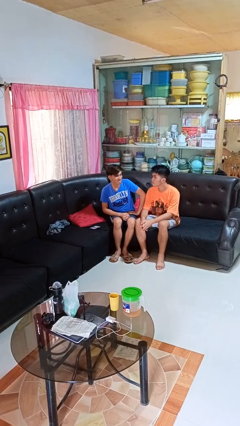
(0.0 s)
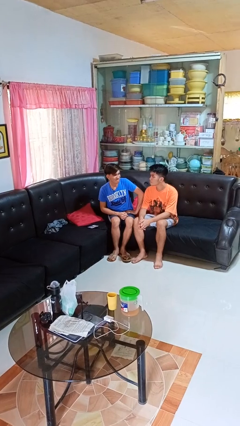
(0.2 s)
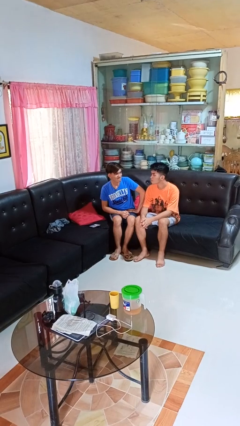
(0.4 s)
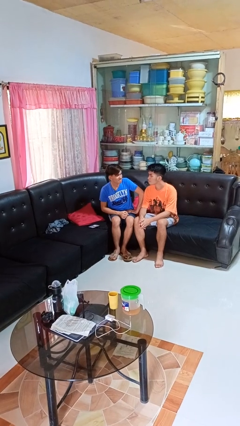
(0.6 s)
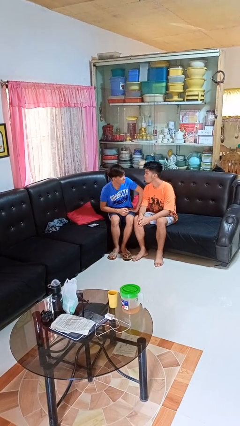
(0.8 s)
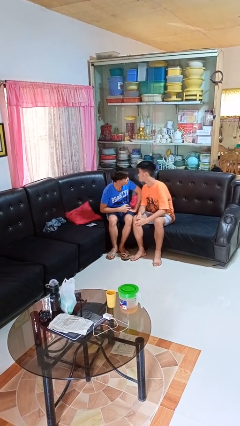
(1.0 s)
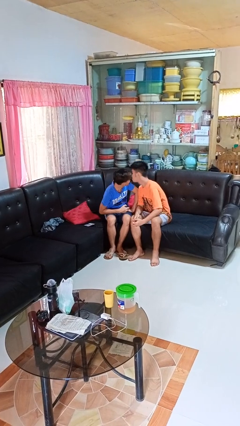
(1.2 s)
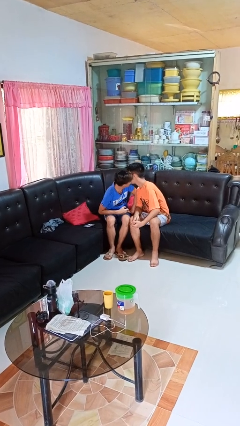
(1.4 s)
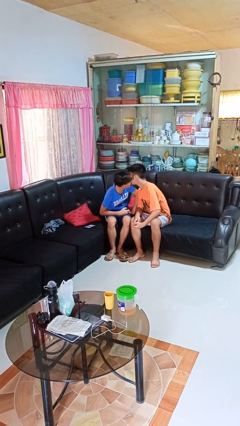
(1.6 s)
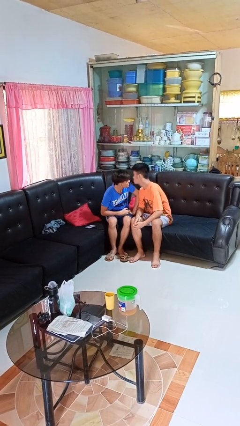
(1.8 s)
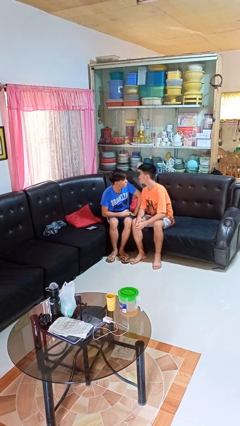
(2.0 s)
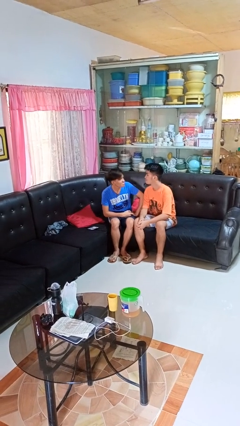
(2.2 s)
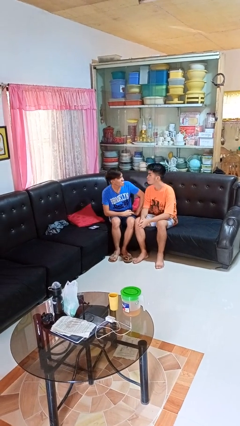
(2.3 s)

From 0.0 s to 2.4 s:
person kisses cheek of person

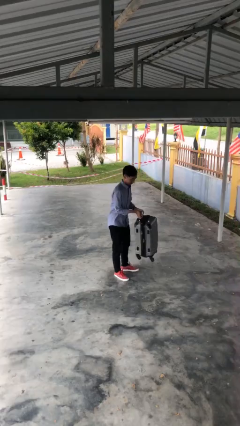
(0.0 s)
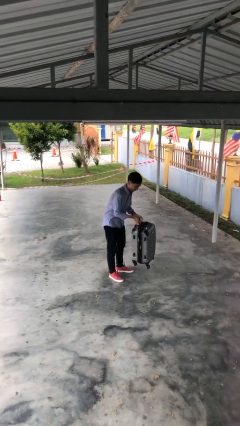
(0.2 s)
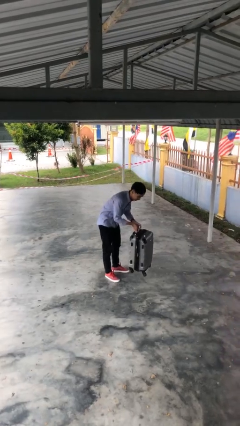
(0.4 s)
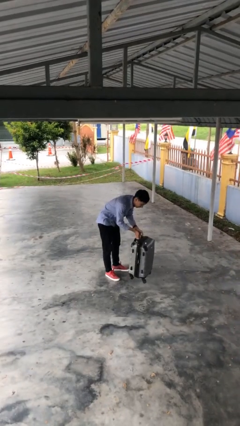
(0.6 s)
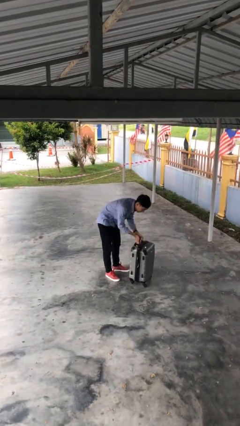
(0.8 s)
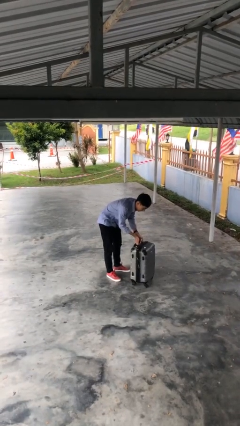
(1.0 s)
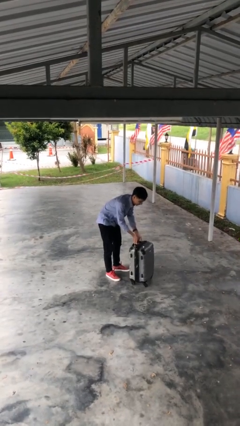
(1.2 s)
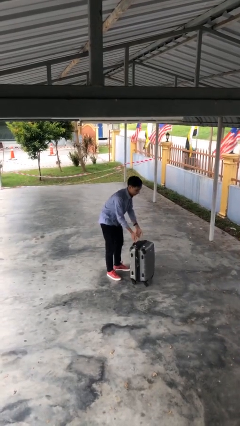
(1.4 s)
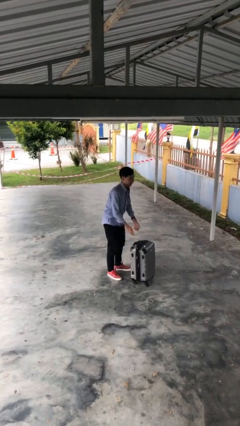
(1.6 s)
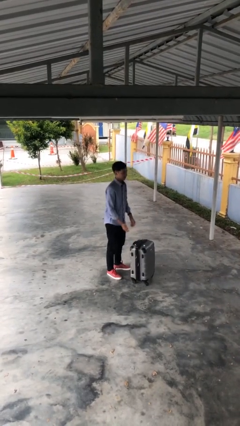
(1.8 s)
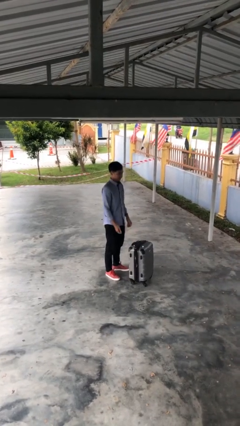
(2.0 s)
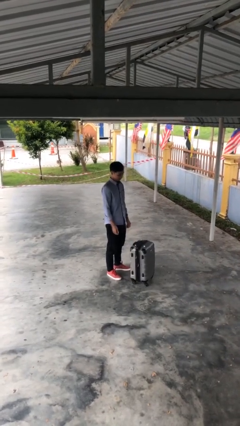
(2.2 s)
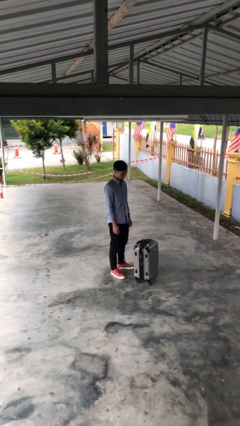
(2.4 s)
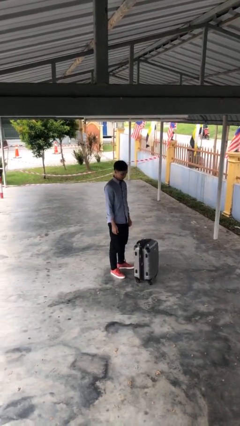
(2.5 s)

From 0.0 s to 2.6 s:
person puts down object on floor

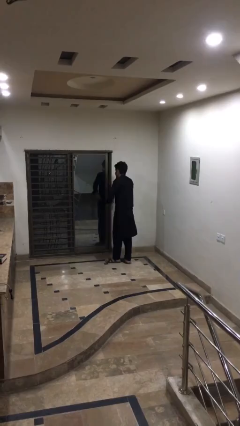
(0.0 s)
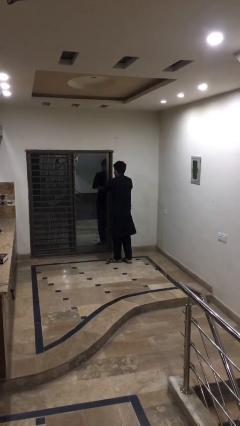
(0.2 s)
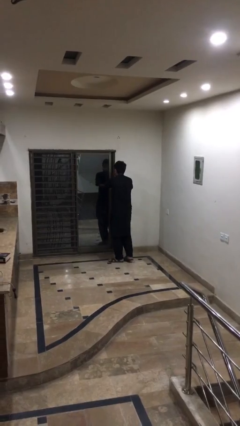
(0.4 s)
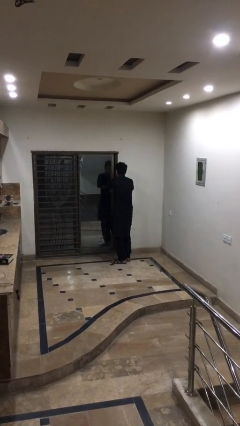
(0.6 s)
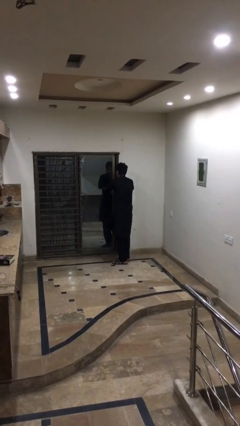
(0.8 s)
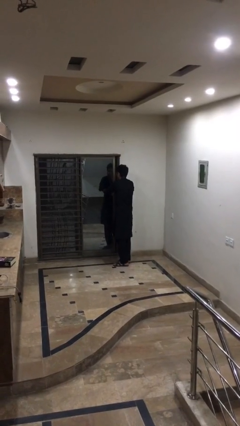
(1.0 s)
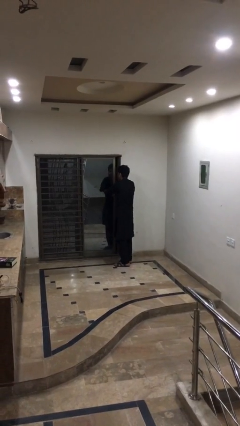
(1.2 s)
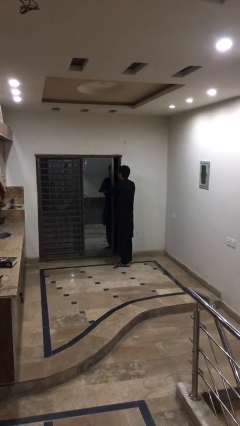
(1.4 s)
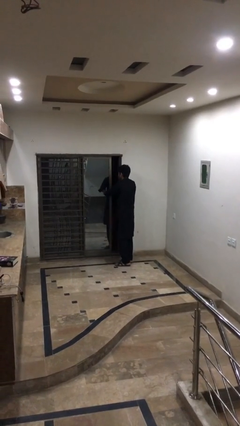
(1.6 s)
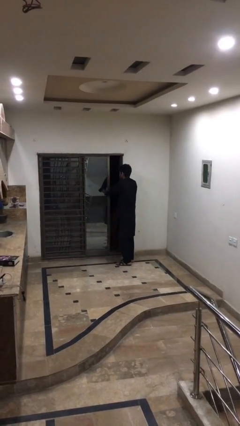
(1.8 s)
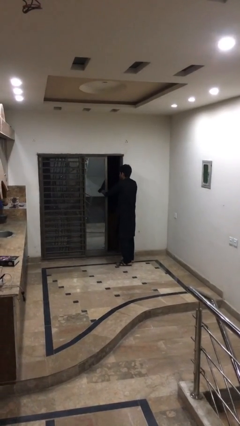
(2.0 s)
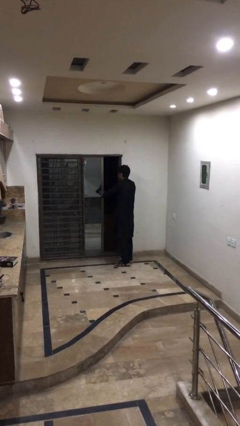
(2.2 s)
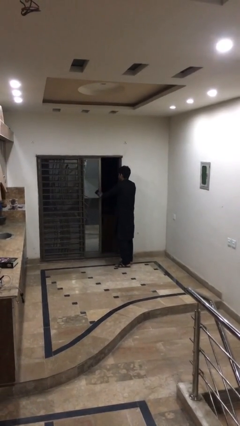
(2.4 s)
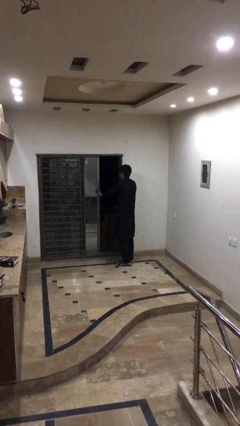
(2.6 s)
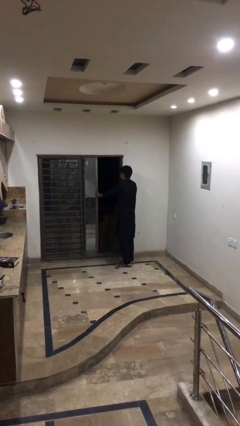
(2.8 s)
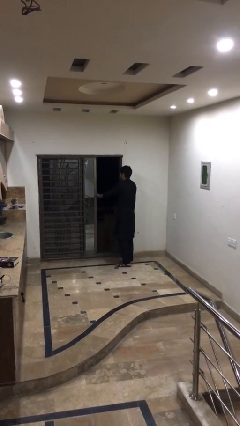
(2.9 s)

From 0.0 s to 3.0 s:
person opens facility door

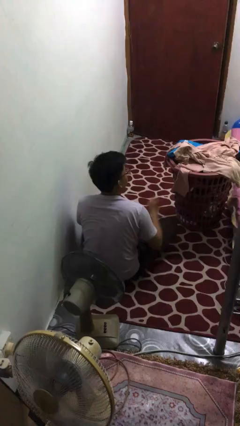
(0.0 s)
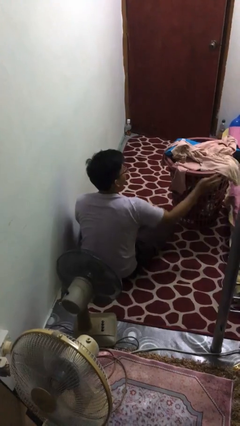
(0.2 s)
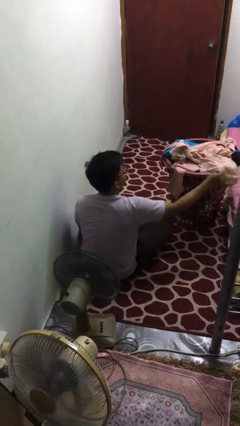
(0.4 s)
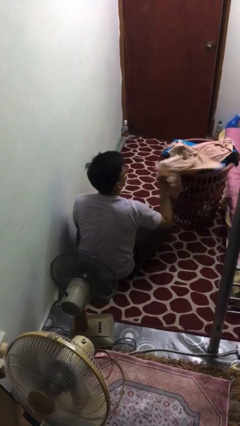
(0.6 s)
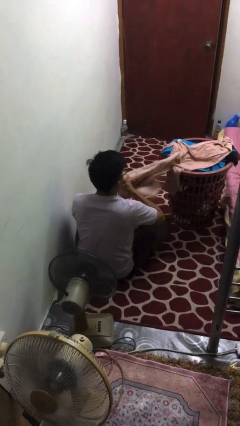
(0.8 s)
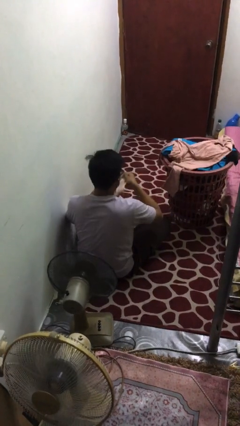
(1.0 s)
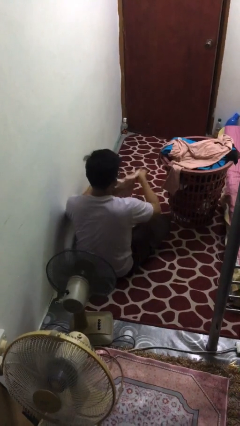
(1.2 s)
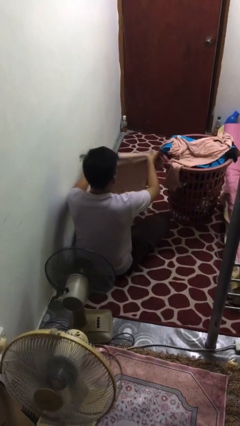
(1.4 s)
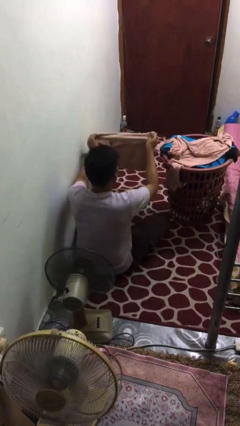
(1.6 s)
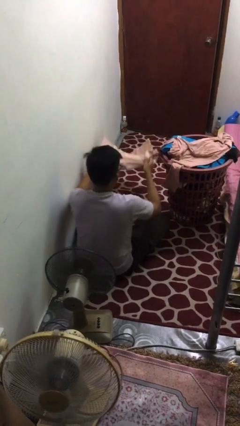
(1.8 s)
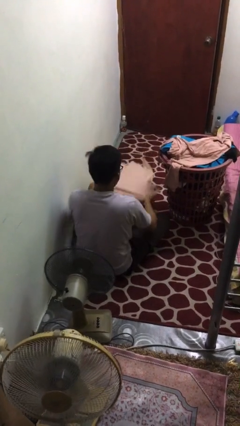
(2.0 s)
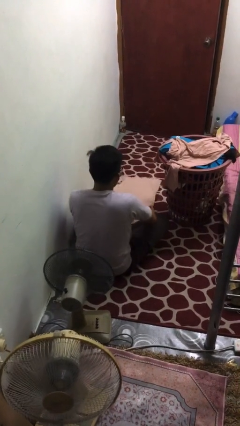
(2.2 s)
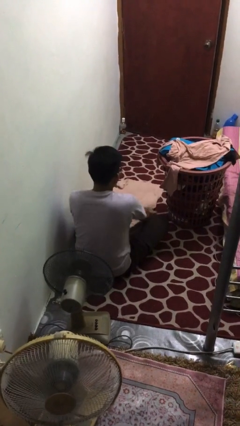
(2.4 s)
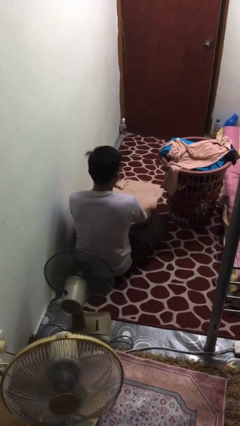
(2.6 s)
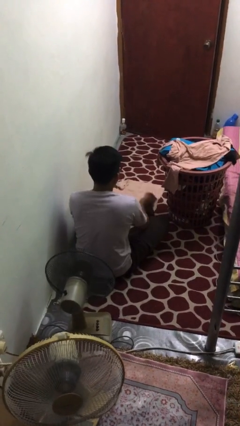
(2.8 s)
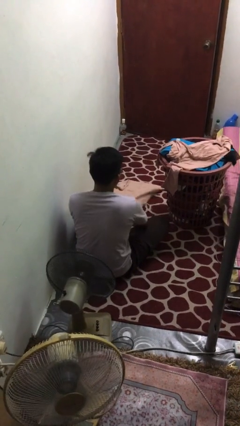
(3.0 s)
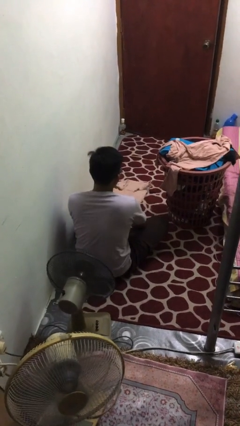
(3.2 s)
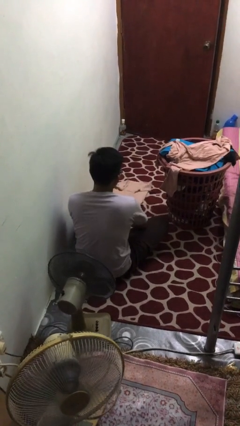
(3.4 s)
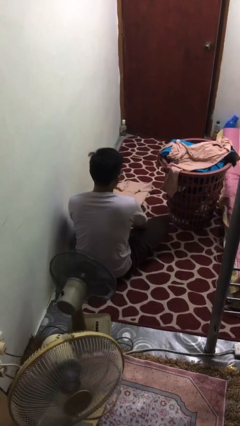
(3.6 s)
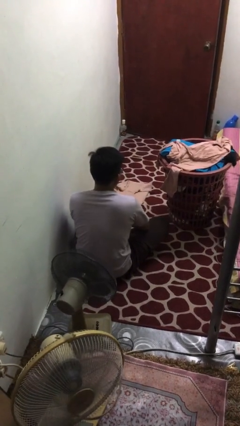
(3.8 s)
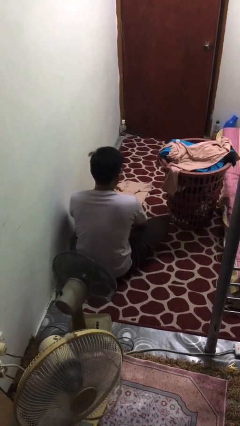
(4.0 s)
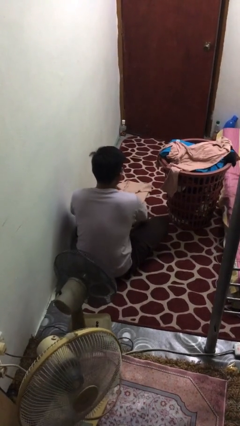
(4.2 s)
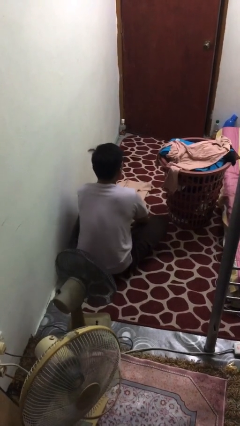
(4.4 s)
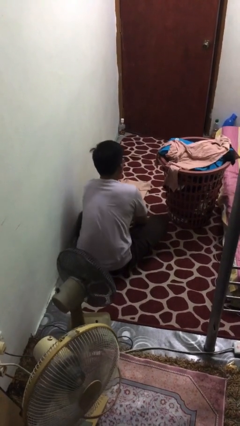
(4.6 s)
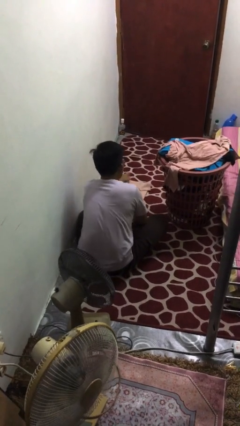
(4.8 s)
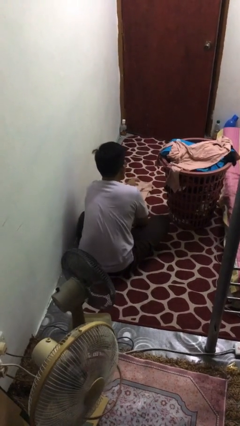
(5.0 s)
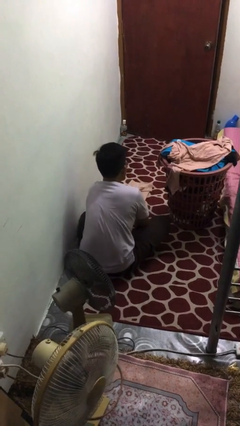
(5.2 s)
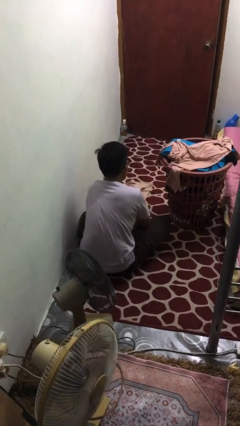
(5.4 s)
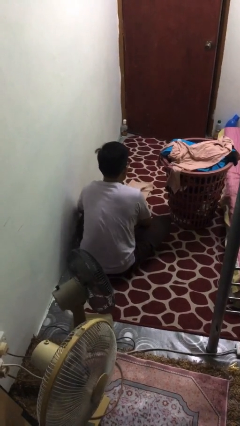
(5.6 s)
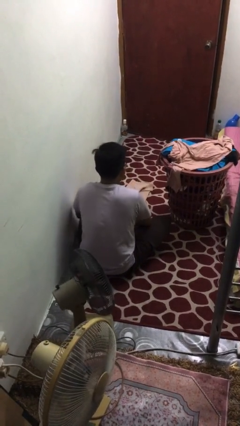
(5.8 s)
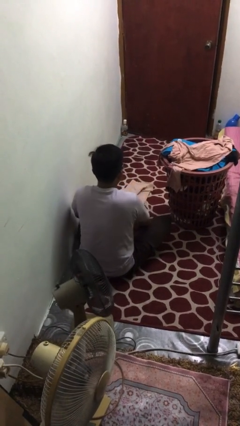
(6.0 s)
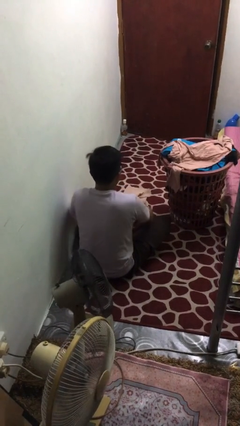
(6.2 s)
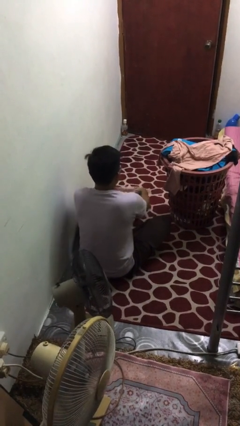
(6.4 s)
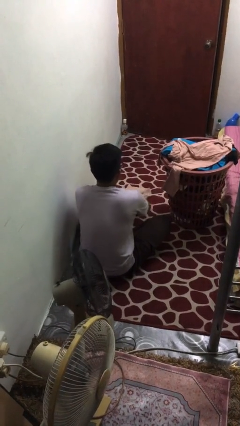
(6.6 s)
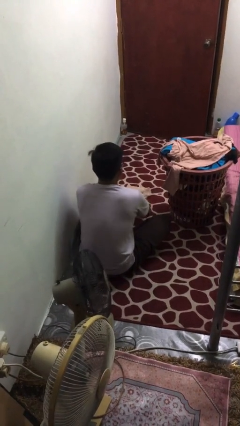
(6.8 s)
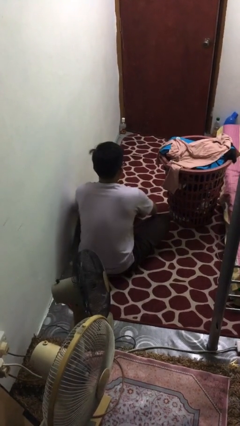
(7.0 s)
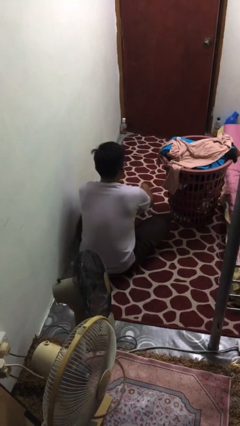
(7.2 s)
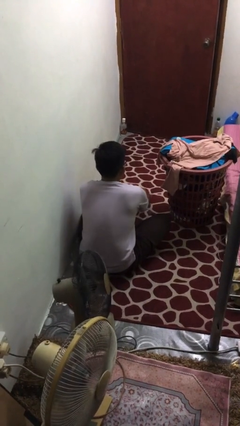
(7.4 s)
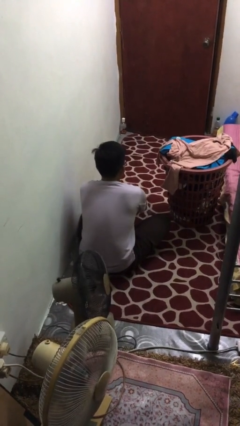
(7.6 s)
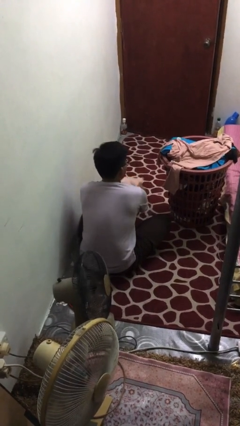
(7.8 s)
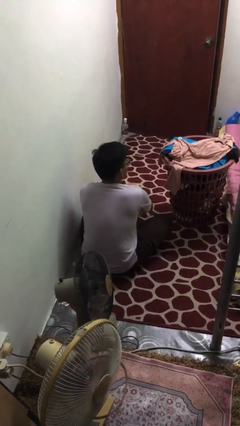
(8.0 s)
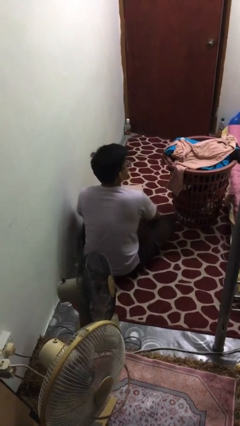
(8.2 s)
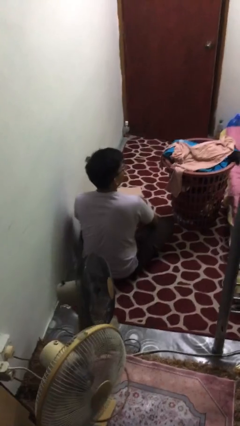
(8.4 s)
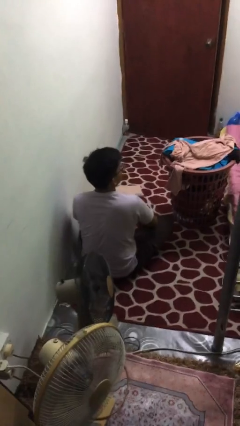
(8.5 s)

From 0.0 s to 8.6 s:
person folds shirt

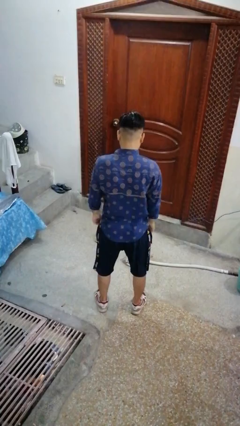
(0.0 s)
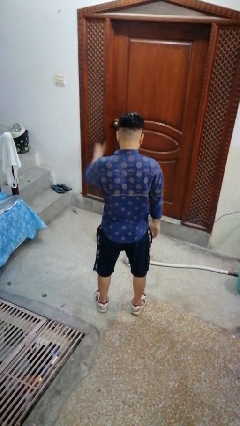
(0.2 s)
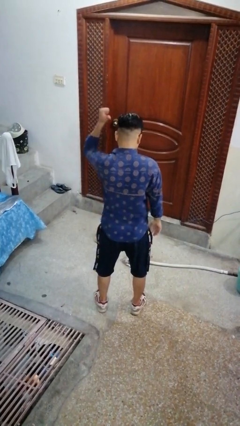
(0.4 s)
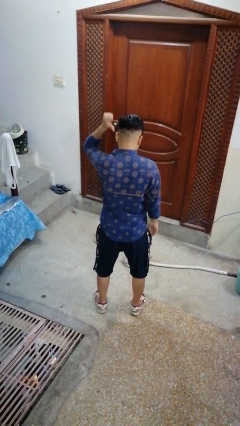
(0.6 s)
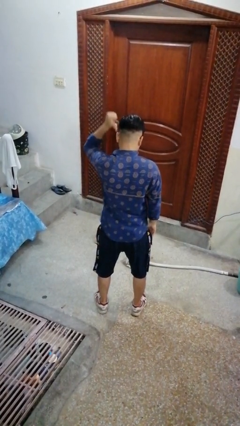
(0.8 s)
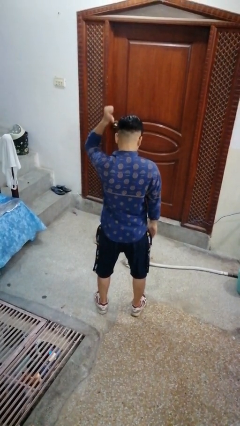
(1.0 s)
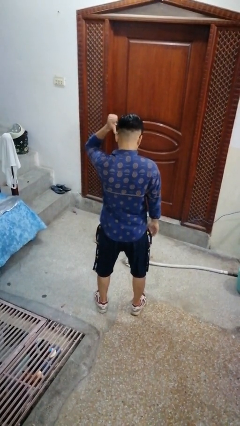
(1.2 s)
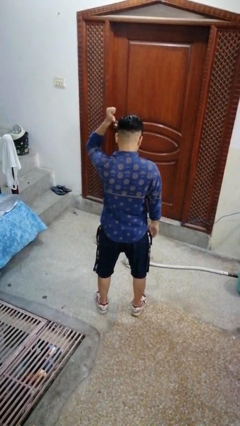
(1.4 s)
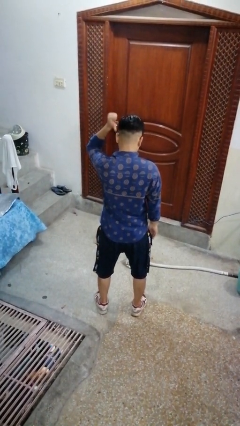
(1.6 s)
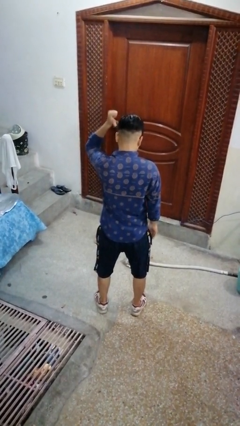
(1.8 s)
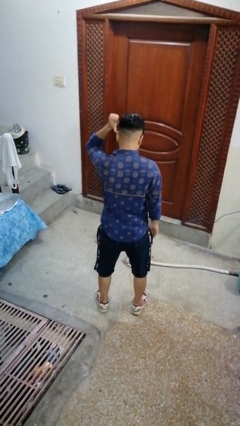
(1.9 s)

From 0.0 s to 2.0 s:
person gestures behind me
